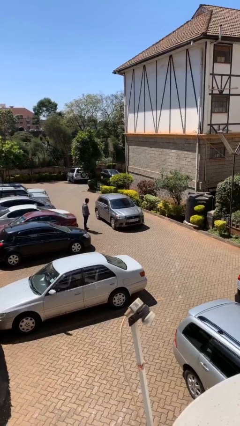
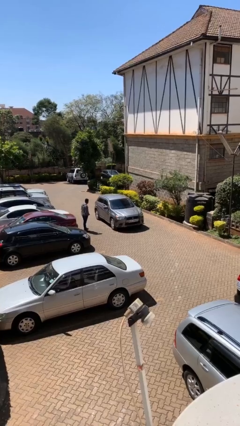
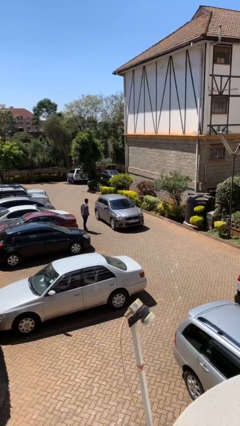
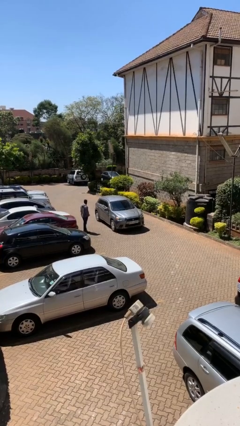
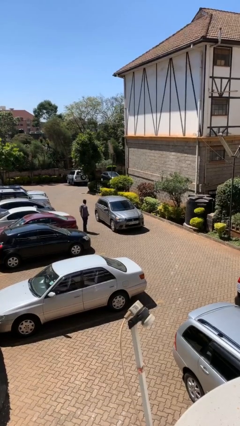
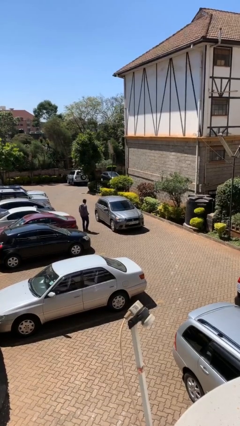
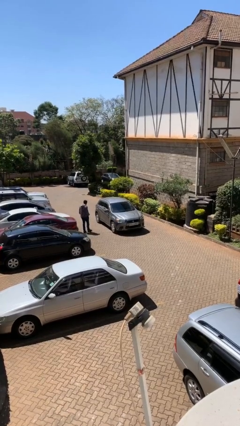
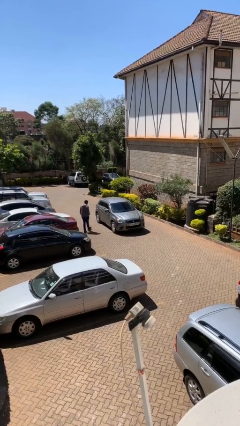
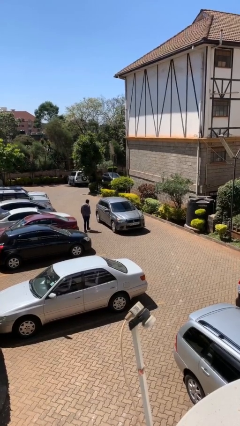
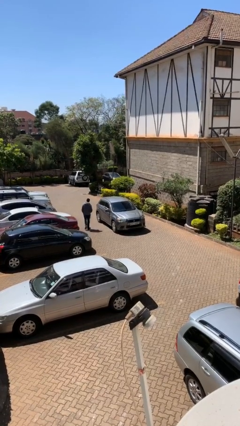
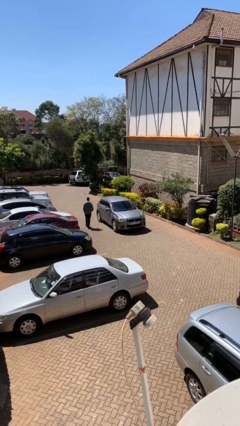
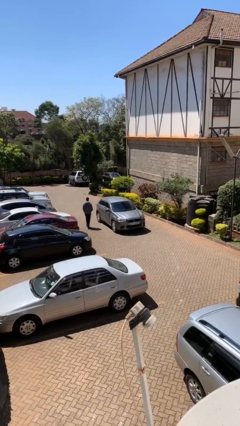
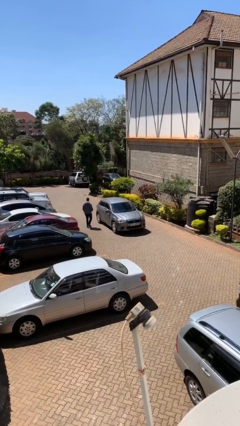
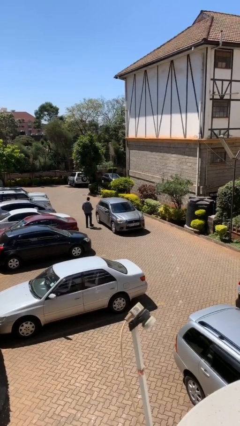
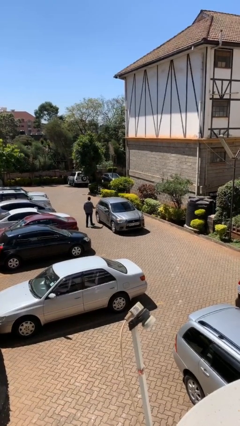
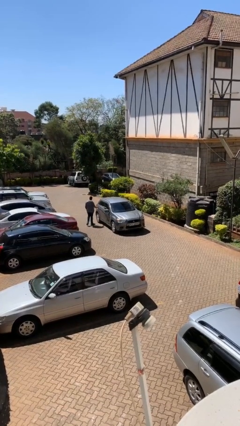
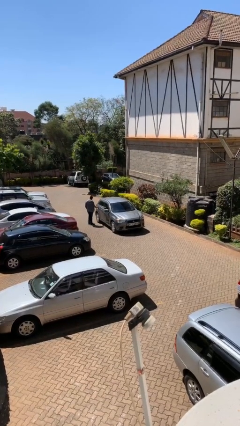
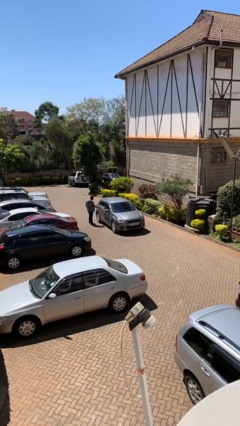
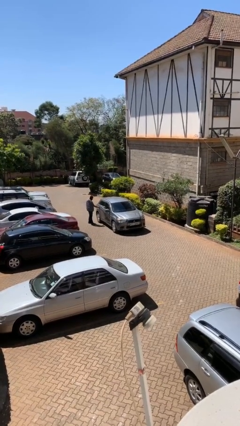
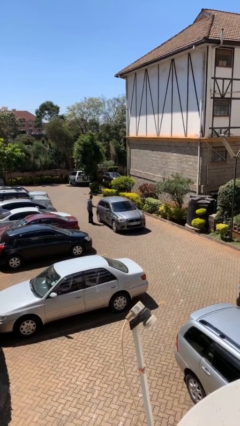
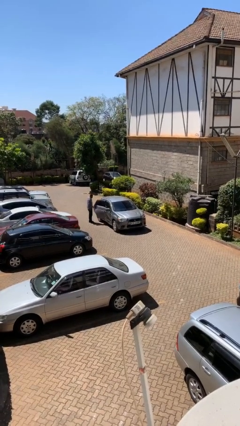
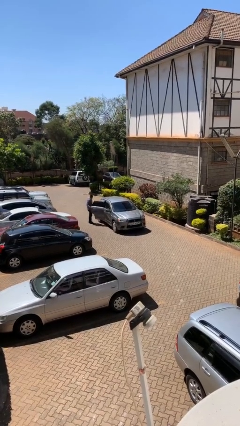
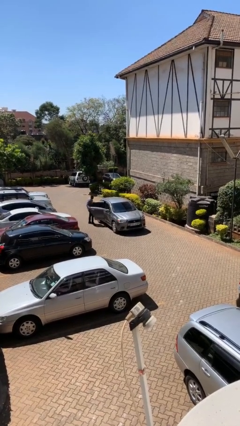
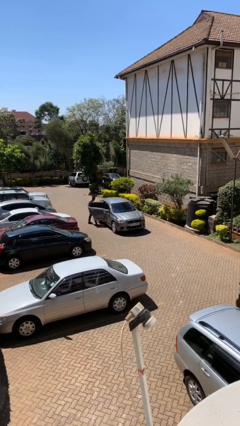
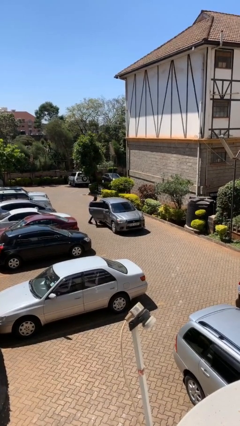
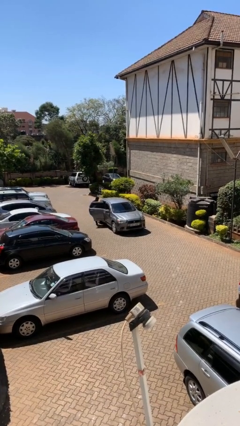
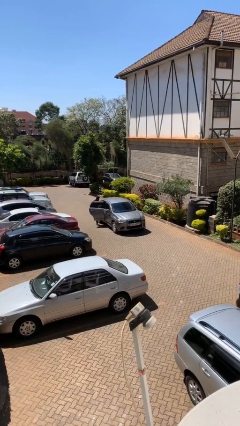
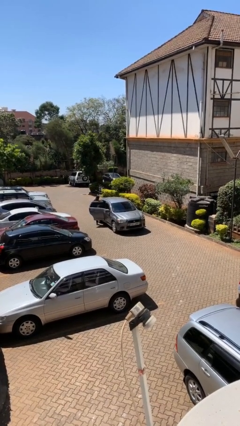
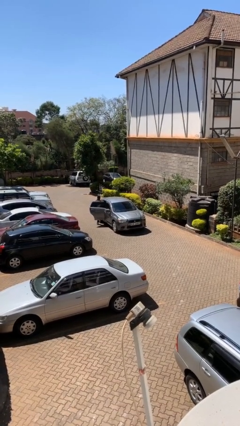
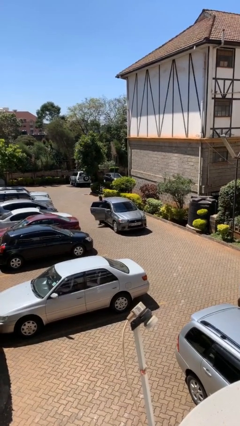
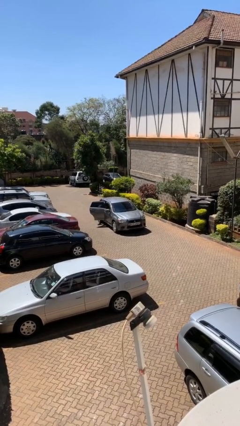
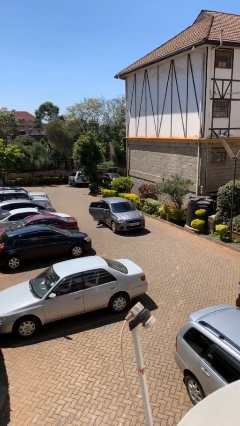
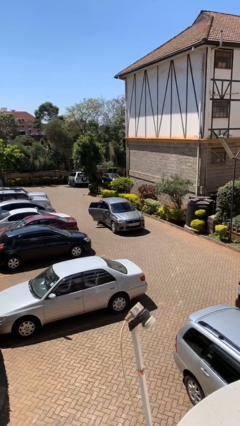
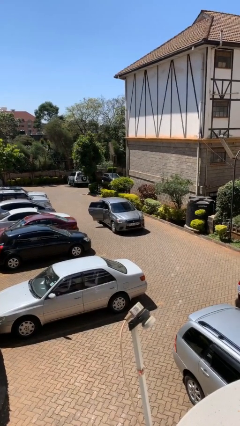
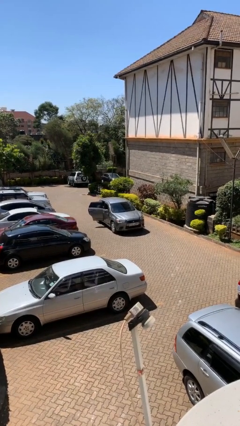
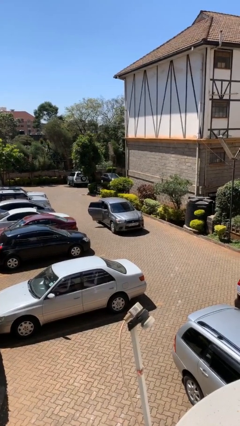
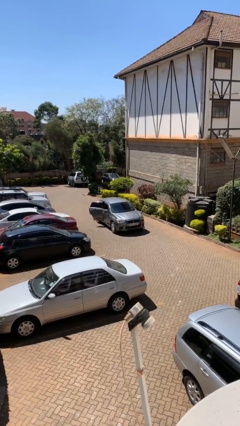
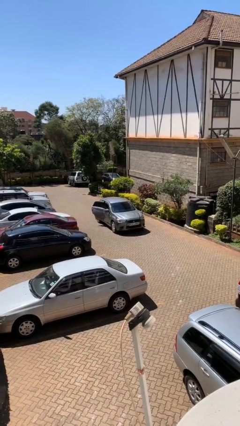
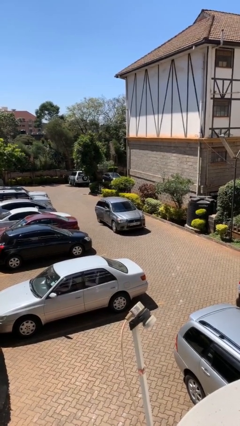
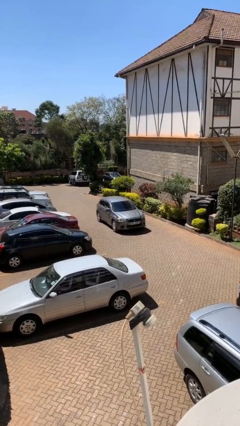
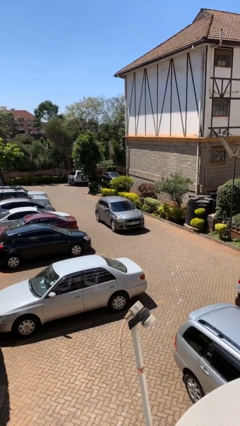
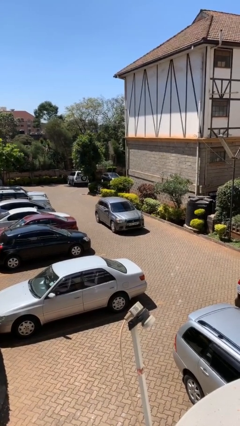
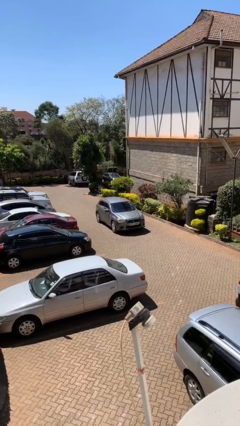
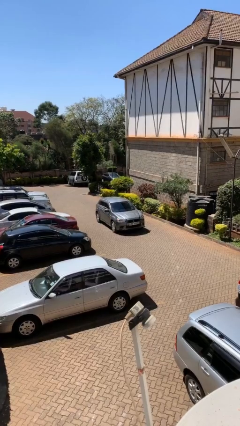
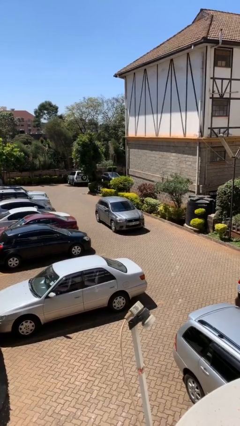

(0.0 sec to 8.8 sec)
car picks up person

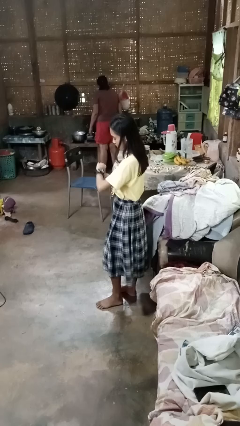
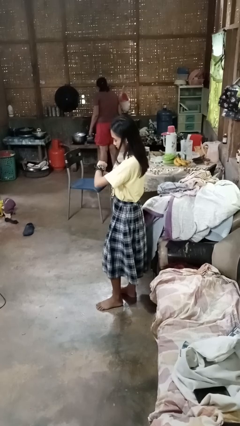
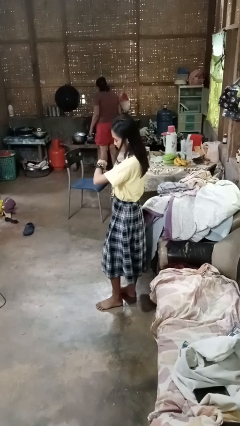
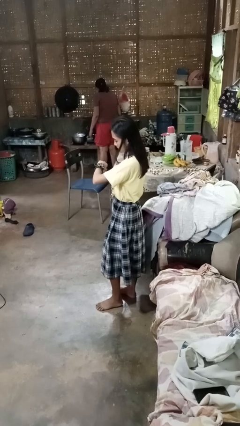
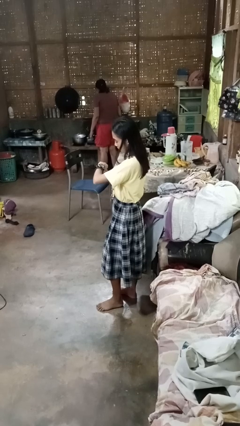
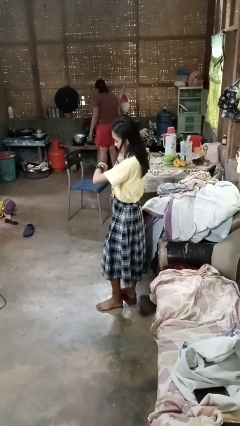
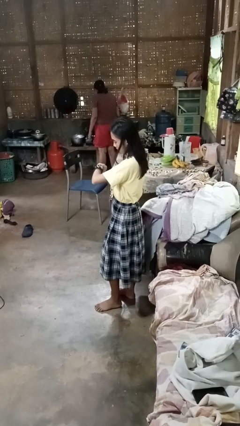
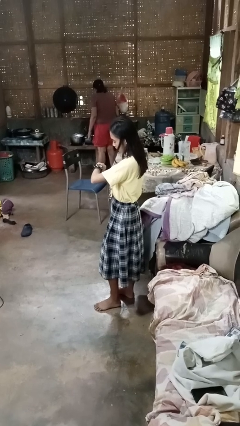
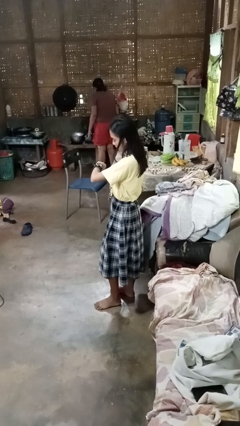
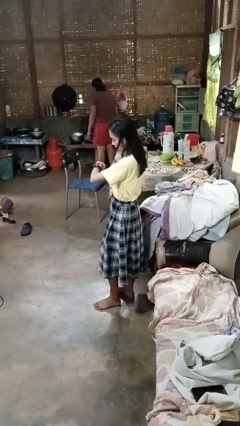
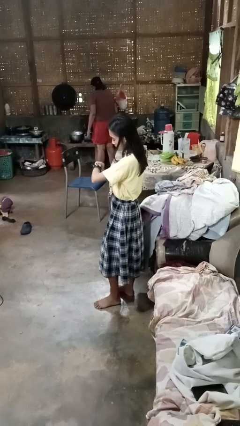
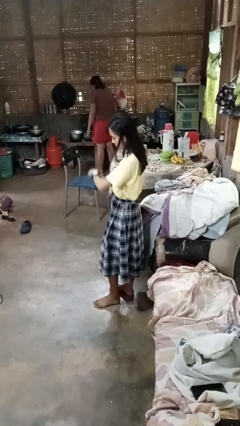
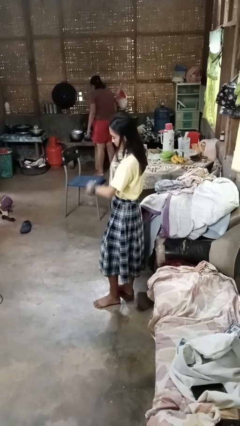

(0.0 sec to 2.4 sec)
person looks at wristwatch

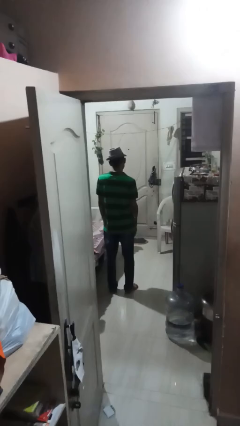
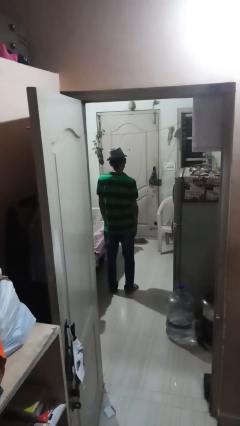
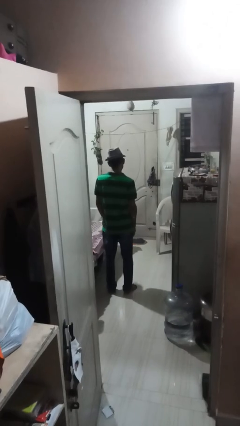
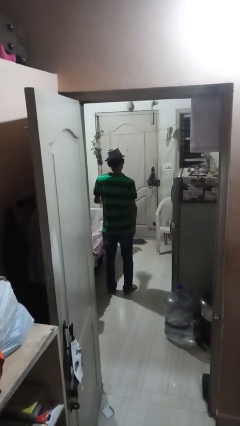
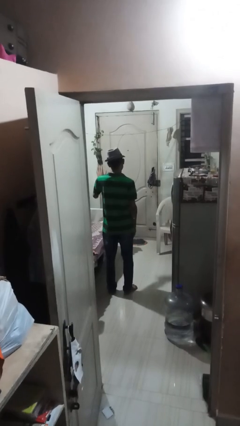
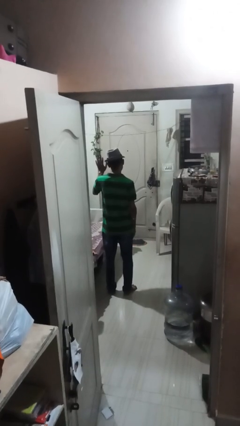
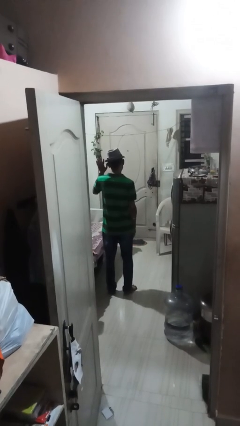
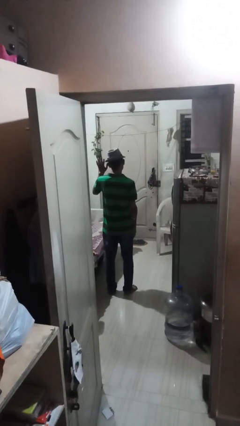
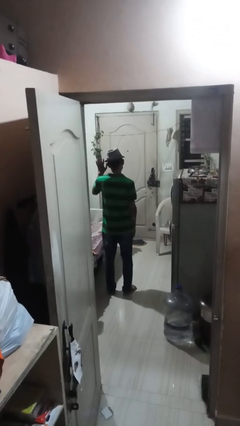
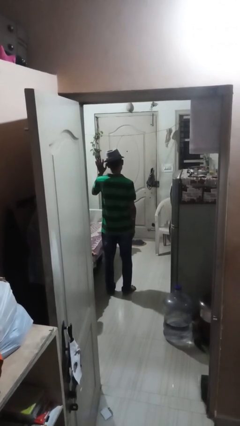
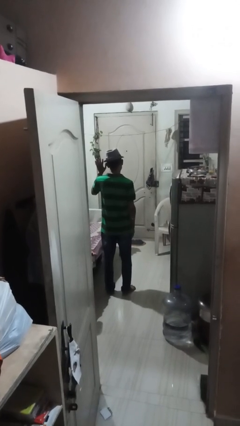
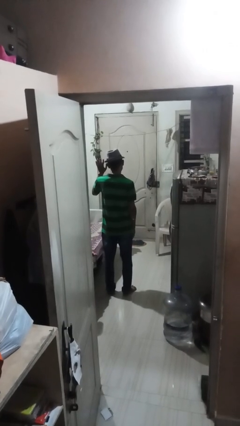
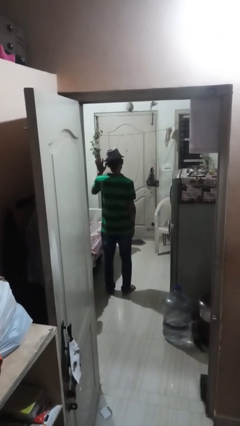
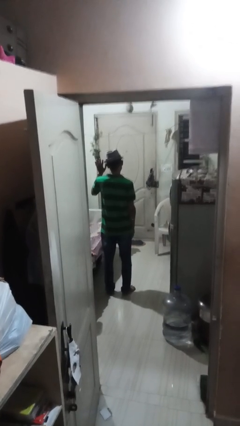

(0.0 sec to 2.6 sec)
person gestures number five

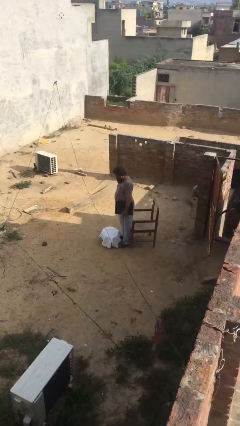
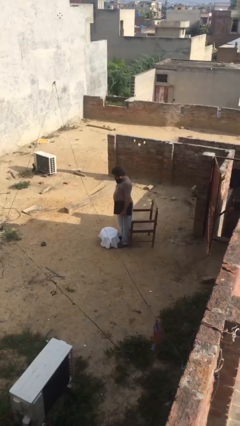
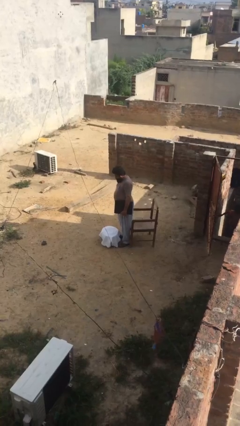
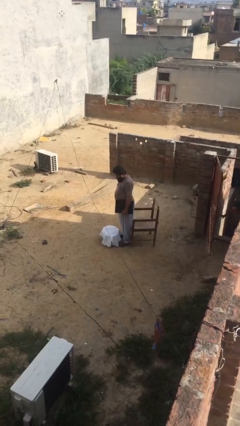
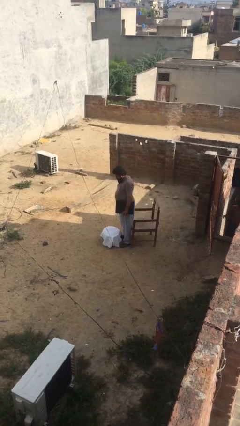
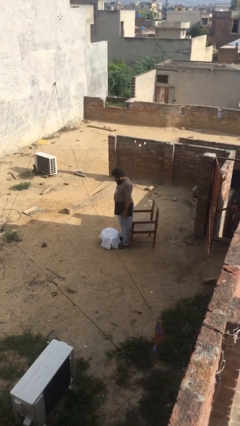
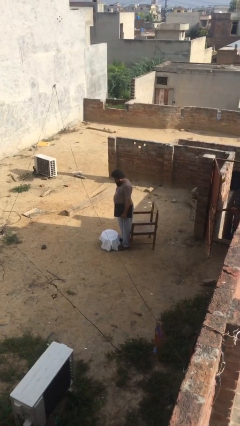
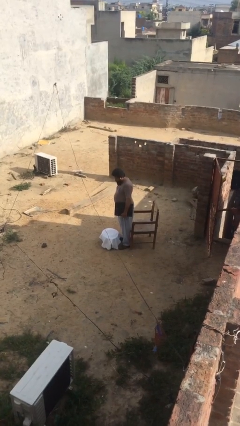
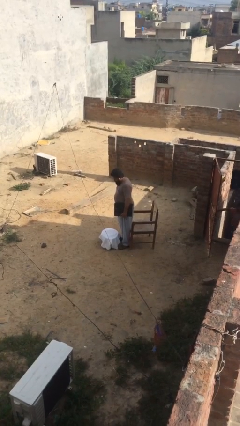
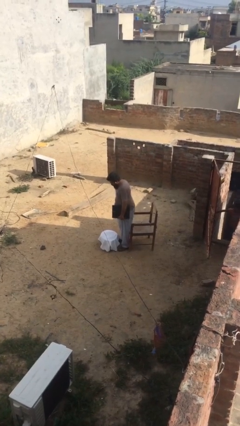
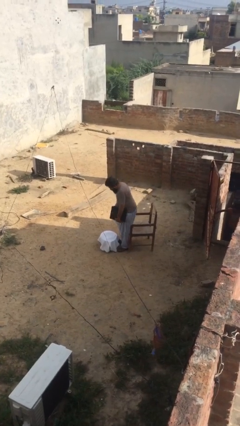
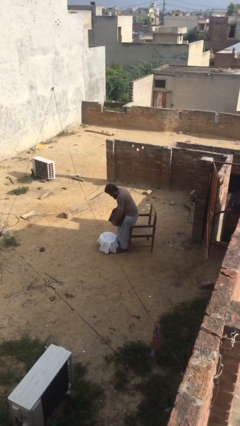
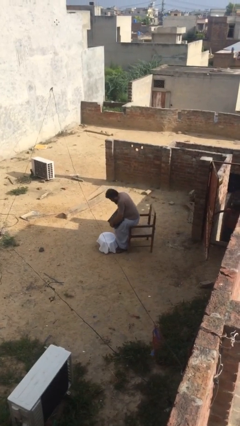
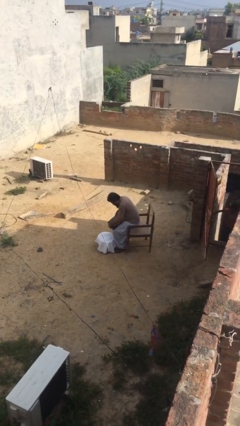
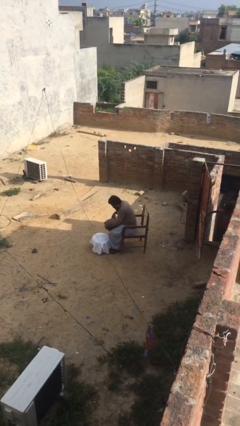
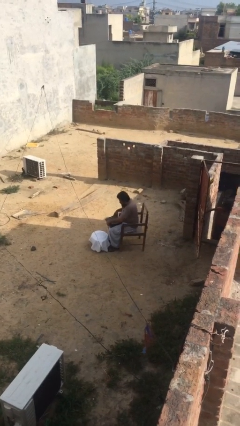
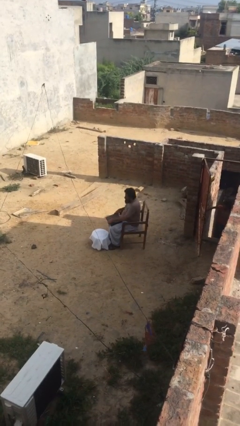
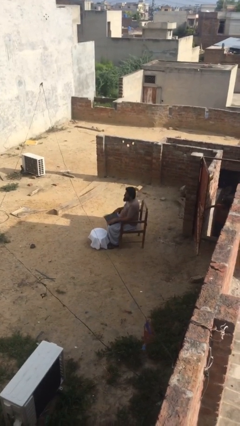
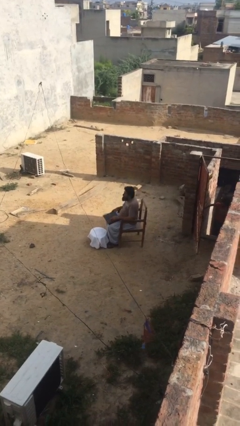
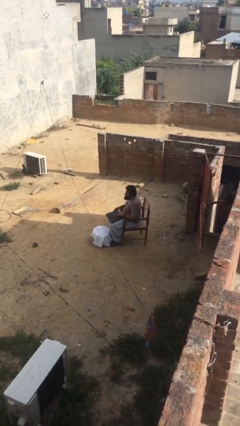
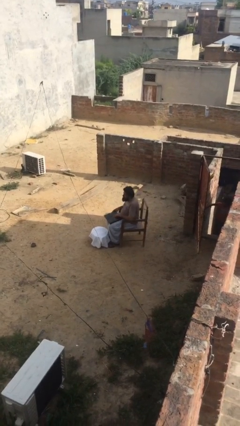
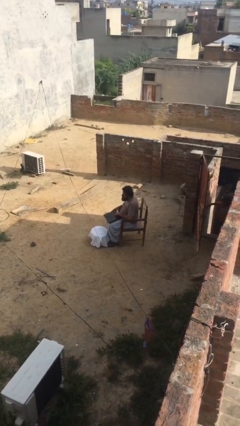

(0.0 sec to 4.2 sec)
person sits down
